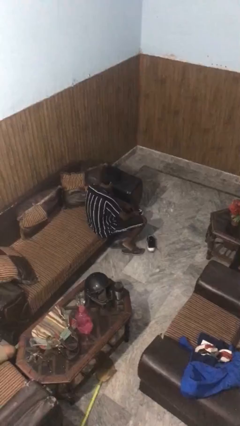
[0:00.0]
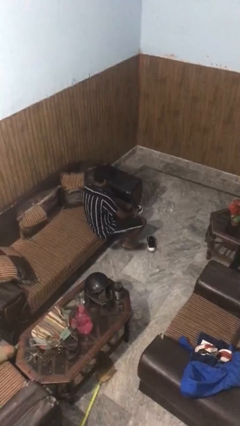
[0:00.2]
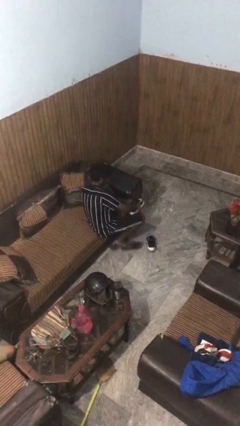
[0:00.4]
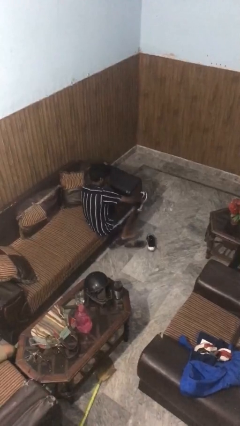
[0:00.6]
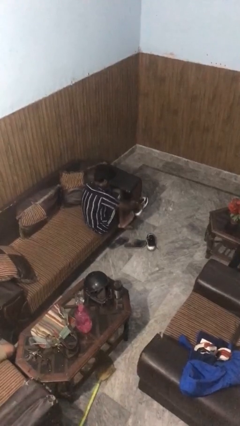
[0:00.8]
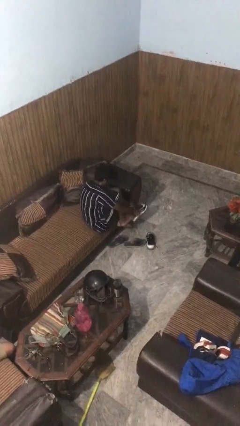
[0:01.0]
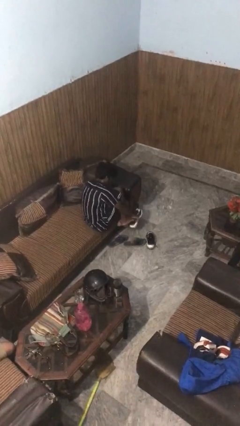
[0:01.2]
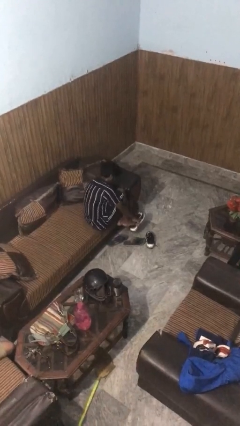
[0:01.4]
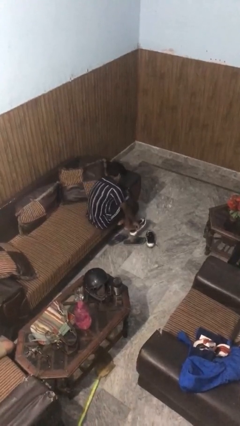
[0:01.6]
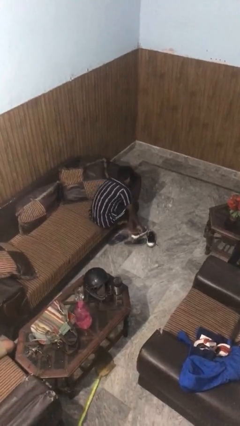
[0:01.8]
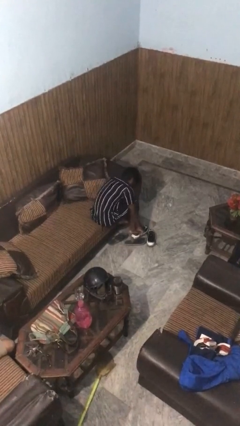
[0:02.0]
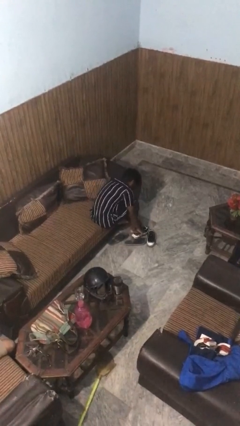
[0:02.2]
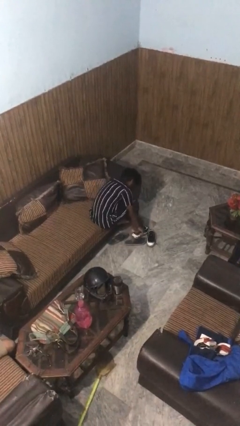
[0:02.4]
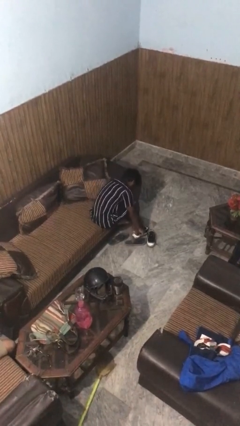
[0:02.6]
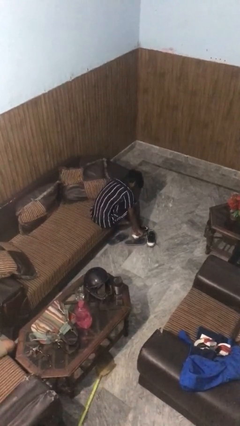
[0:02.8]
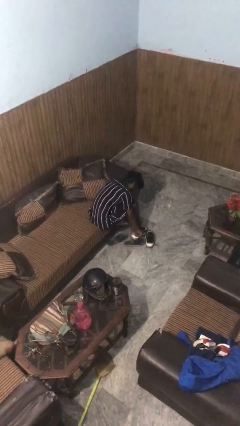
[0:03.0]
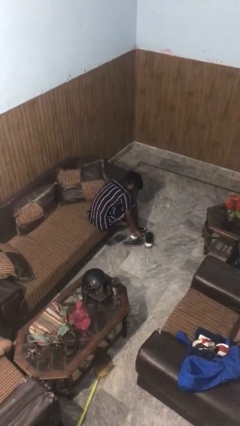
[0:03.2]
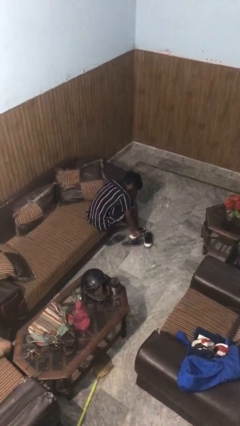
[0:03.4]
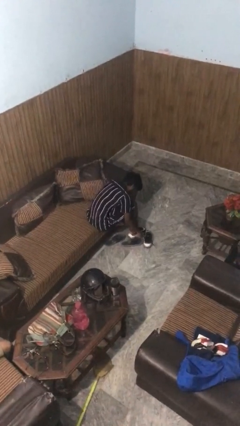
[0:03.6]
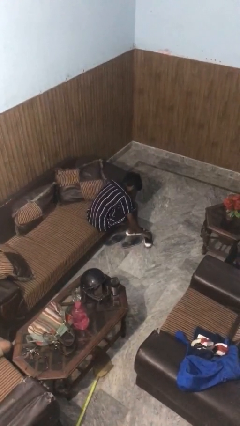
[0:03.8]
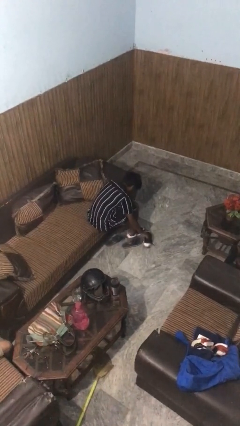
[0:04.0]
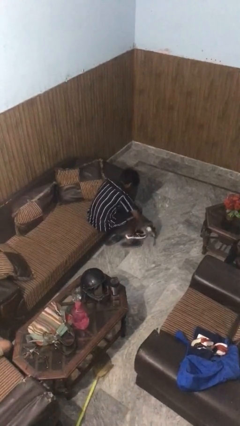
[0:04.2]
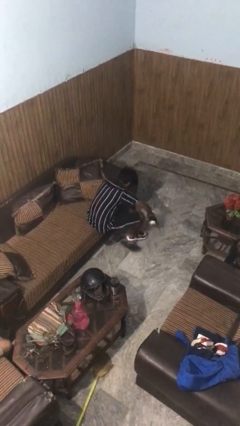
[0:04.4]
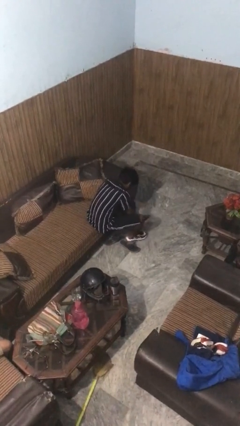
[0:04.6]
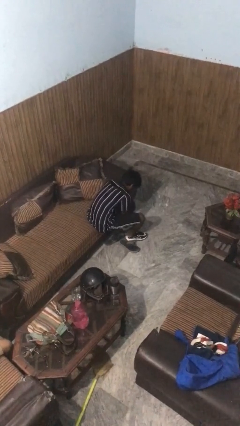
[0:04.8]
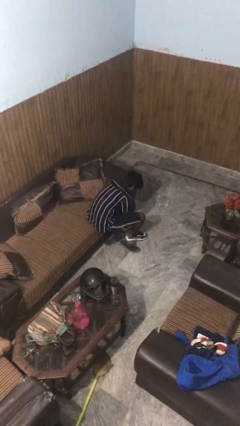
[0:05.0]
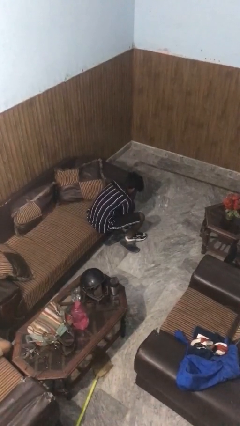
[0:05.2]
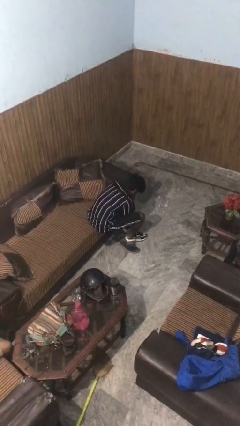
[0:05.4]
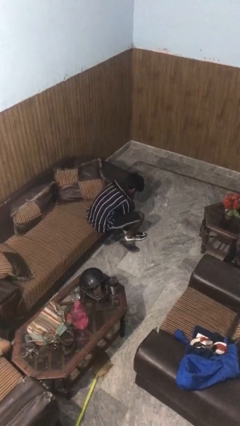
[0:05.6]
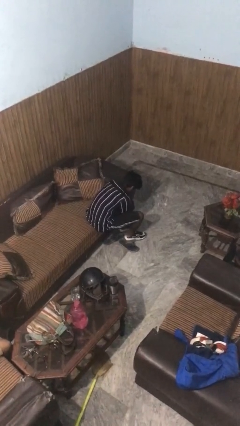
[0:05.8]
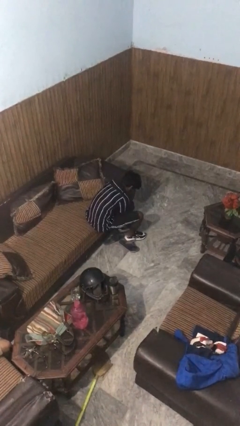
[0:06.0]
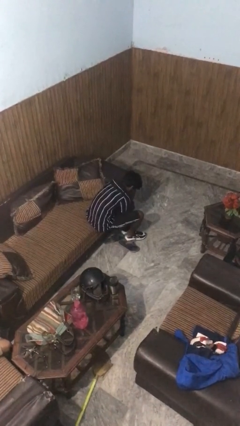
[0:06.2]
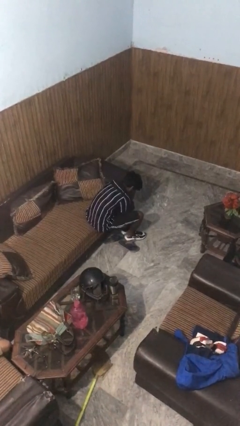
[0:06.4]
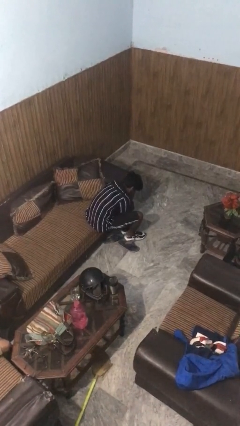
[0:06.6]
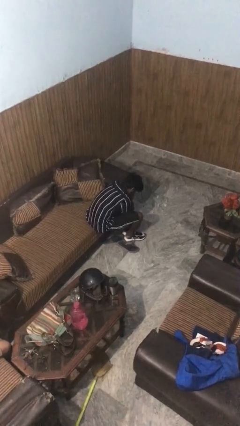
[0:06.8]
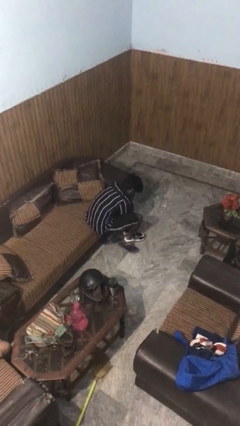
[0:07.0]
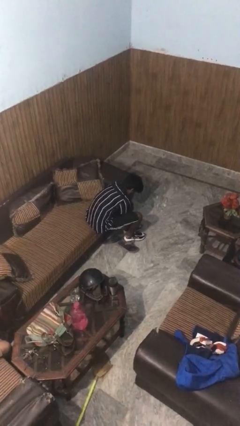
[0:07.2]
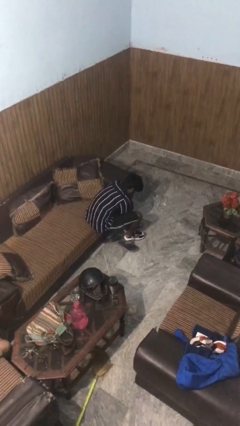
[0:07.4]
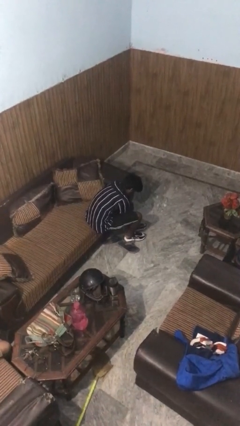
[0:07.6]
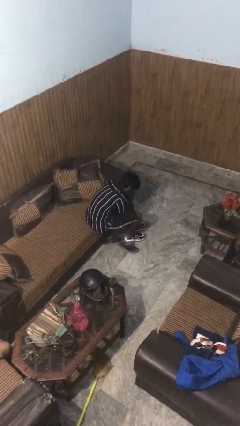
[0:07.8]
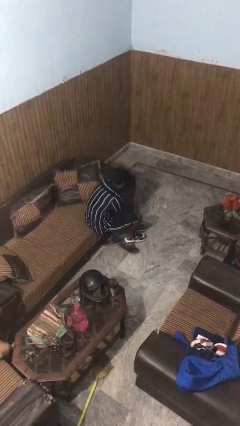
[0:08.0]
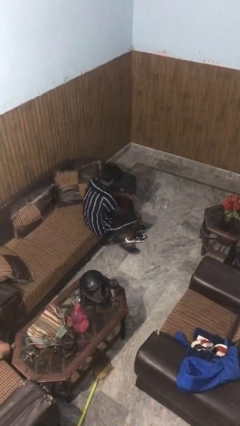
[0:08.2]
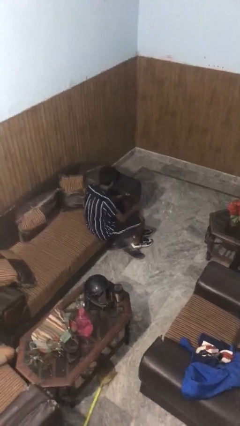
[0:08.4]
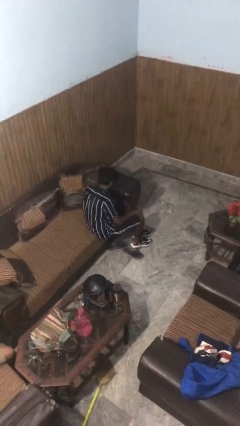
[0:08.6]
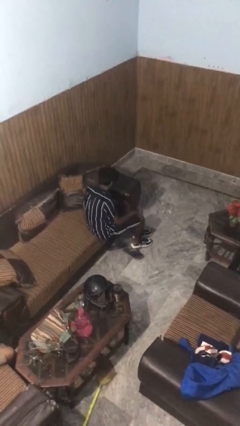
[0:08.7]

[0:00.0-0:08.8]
person puts on shoes

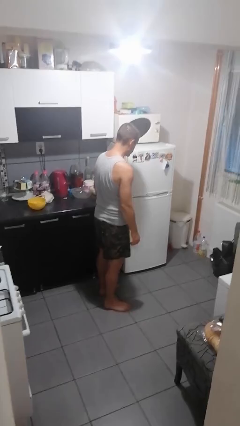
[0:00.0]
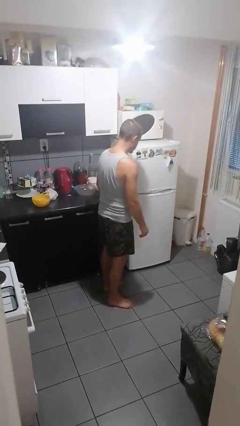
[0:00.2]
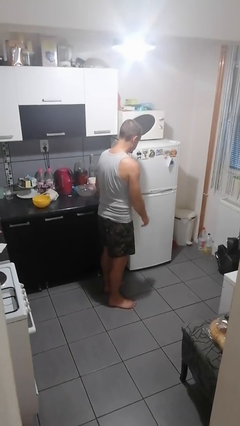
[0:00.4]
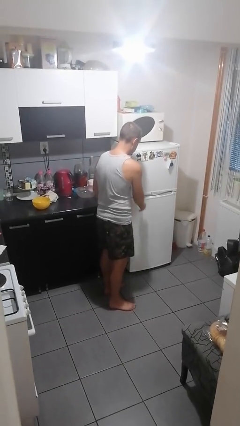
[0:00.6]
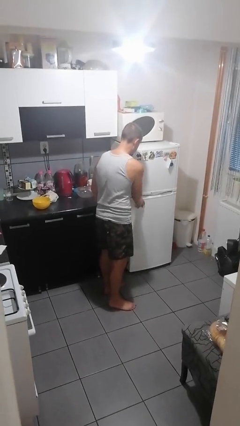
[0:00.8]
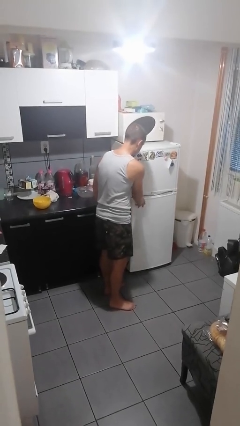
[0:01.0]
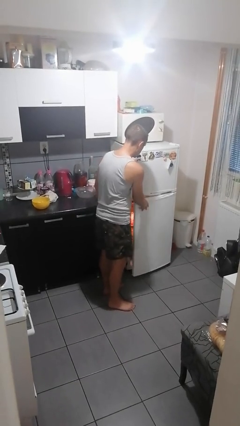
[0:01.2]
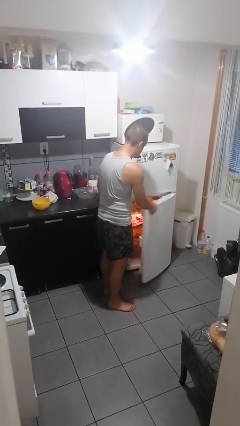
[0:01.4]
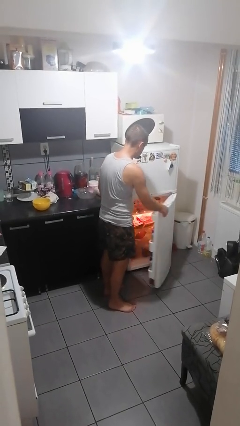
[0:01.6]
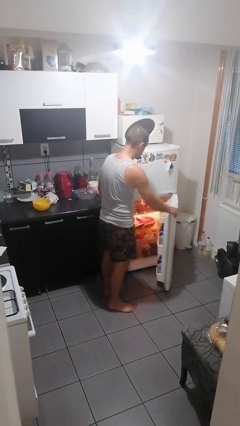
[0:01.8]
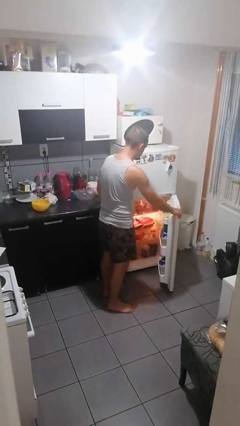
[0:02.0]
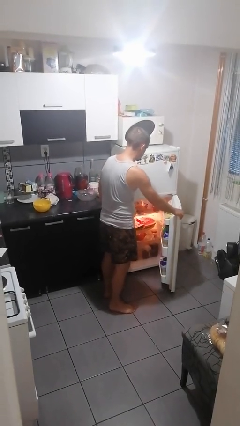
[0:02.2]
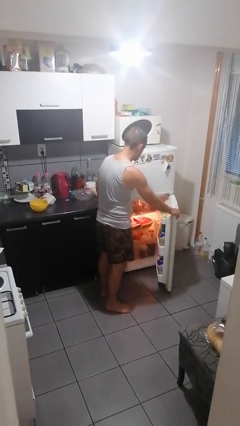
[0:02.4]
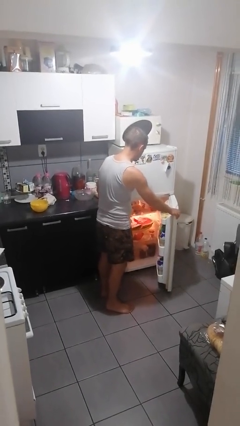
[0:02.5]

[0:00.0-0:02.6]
person opens refrigerator

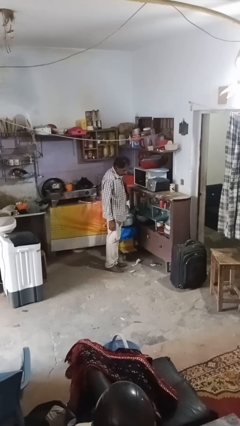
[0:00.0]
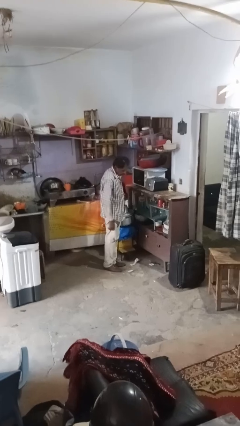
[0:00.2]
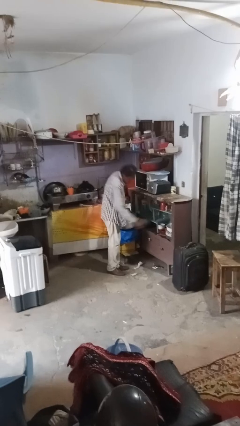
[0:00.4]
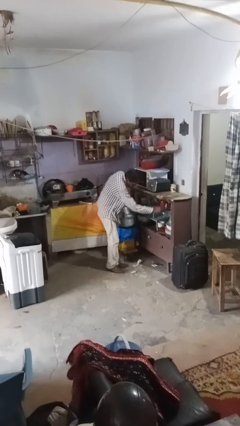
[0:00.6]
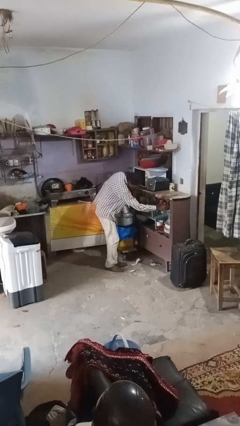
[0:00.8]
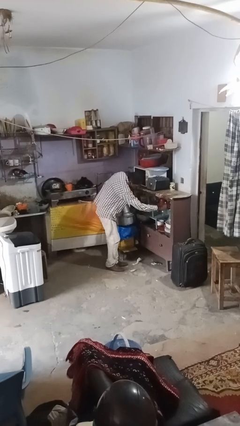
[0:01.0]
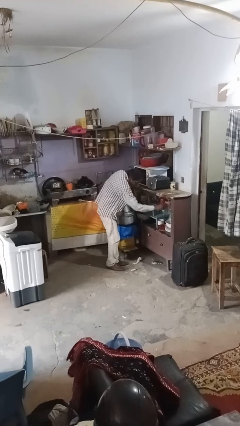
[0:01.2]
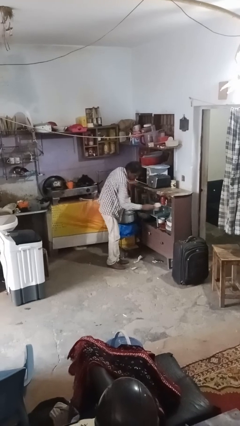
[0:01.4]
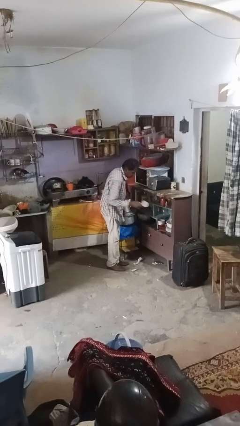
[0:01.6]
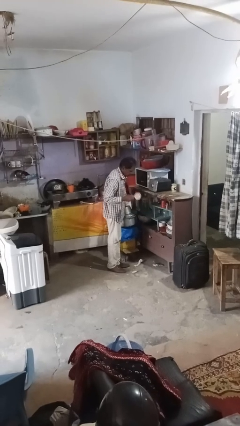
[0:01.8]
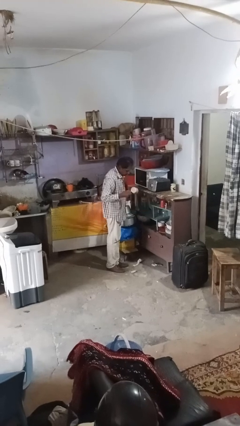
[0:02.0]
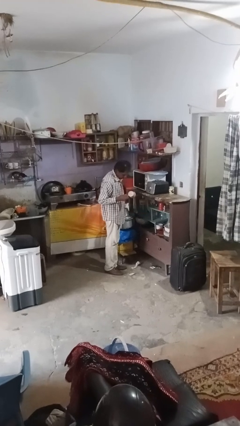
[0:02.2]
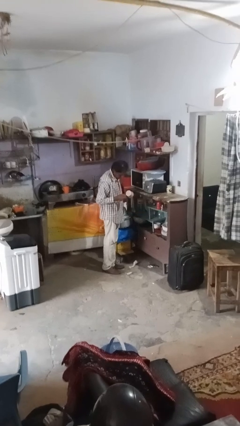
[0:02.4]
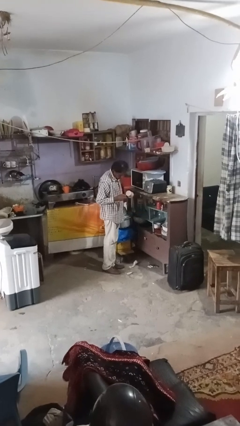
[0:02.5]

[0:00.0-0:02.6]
person takes object from kitchen drawer

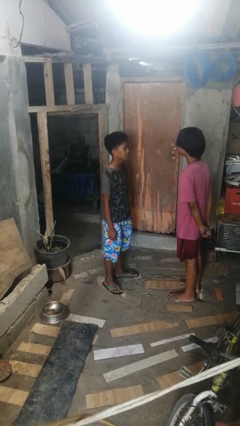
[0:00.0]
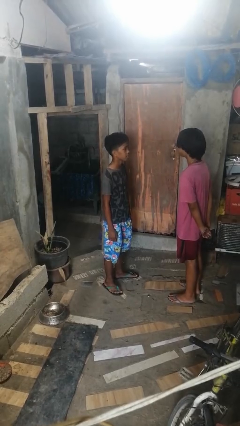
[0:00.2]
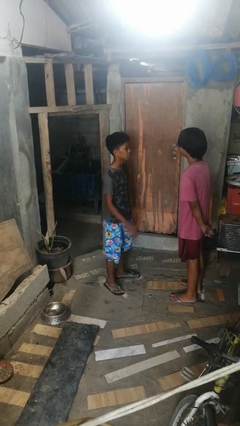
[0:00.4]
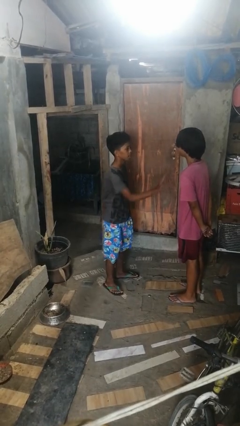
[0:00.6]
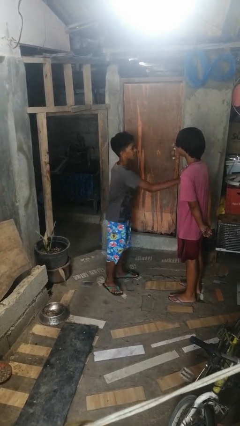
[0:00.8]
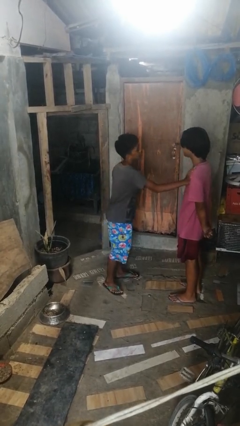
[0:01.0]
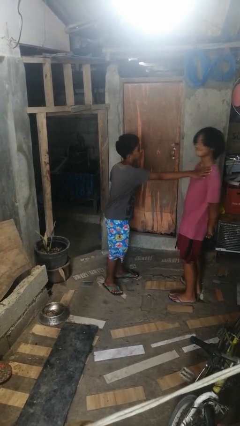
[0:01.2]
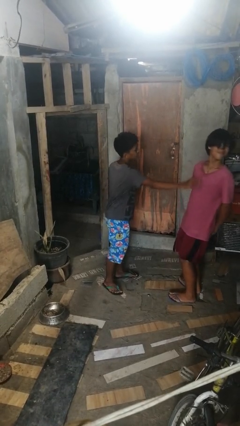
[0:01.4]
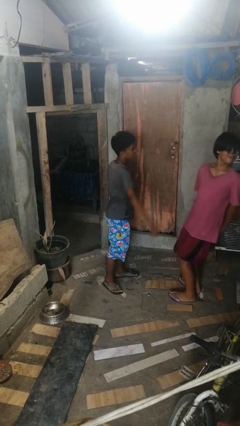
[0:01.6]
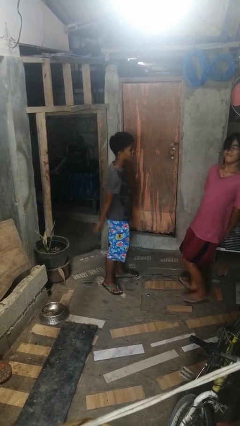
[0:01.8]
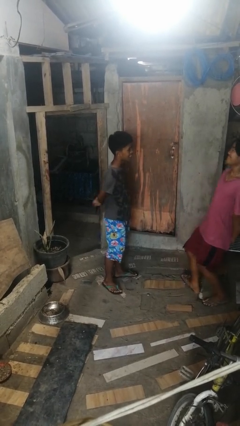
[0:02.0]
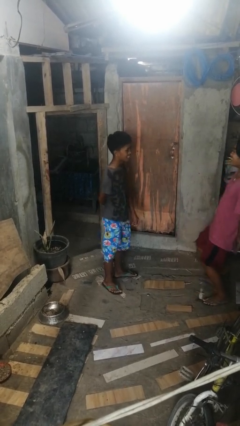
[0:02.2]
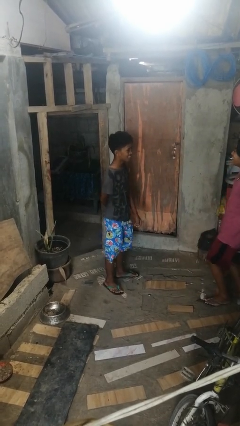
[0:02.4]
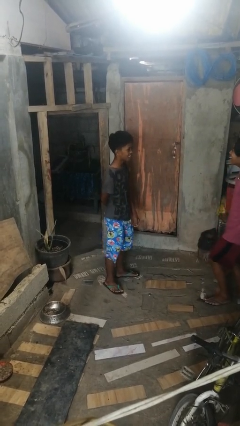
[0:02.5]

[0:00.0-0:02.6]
person shoves person

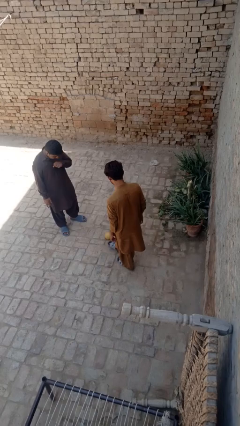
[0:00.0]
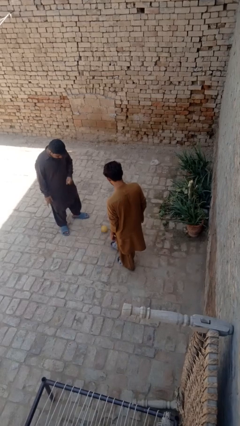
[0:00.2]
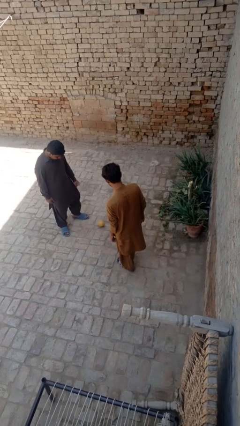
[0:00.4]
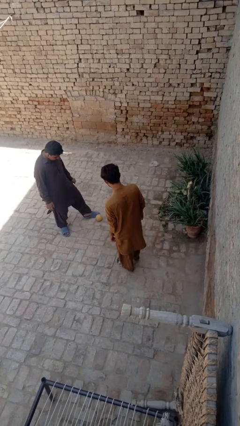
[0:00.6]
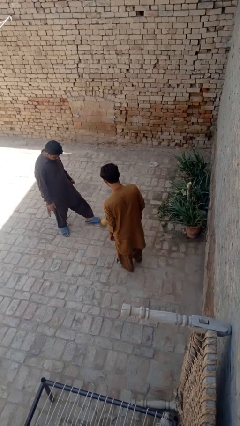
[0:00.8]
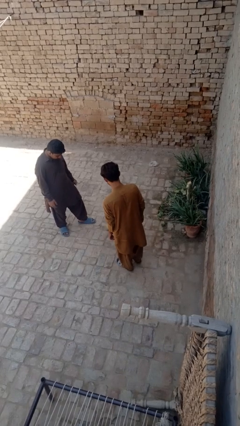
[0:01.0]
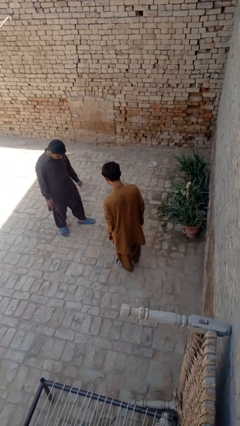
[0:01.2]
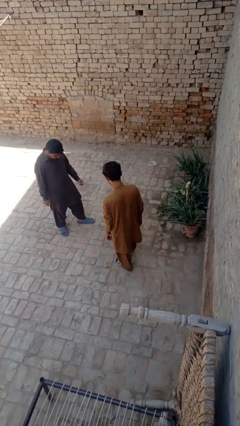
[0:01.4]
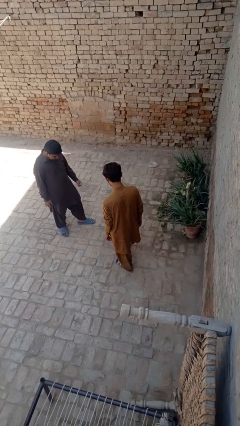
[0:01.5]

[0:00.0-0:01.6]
person kicks object to person
